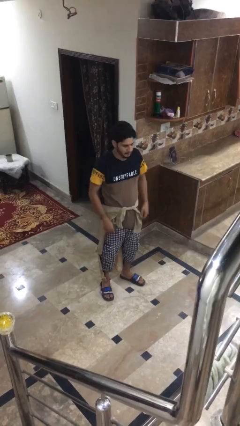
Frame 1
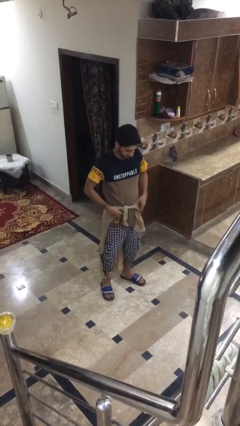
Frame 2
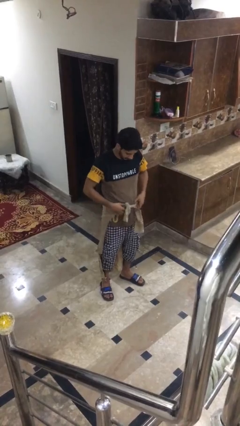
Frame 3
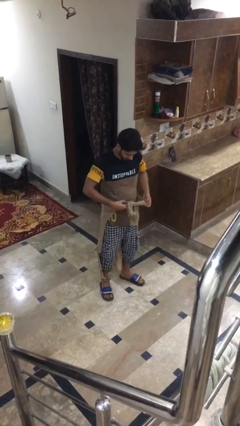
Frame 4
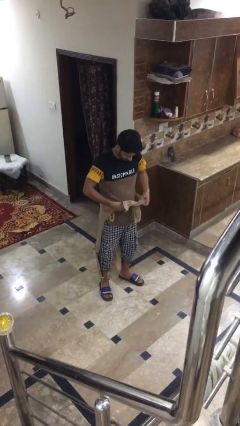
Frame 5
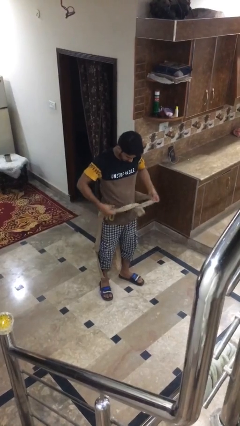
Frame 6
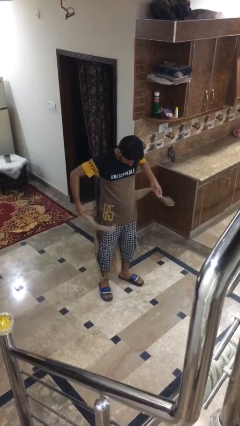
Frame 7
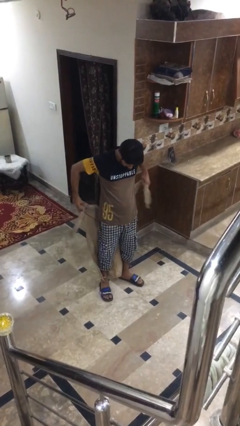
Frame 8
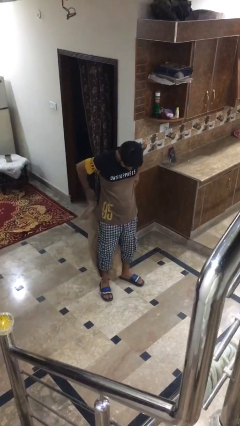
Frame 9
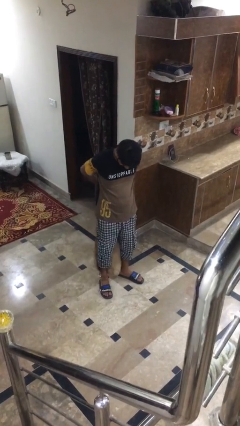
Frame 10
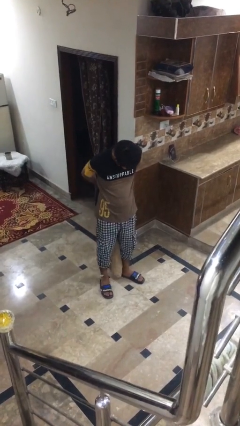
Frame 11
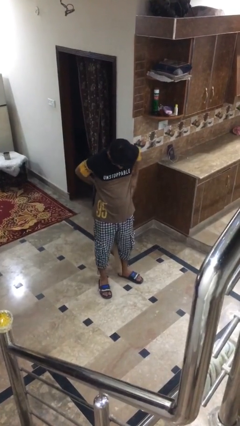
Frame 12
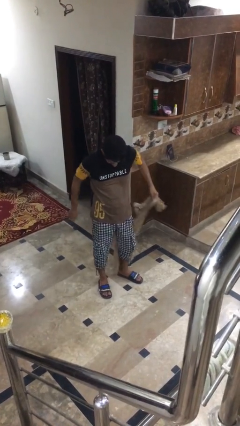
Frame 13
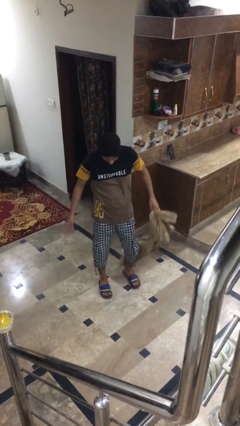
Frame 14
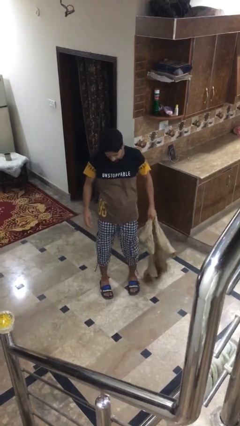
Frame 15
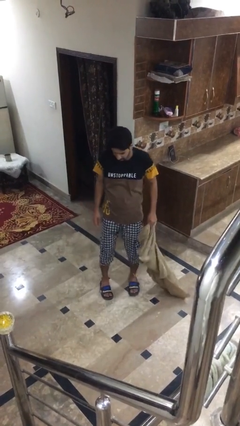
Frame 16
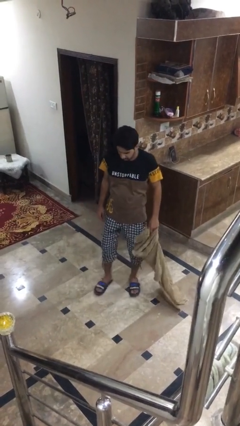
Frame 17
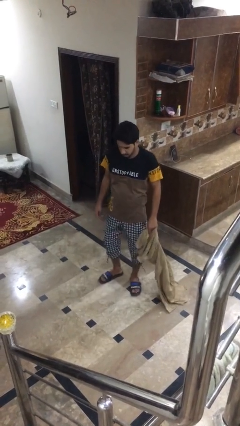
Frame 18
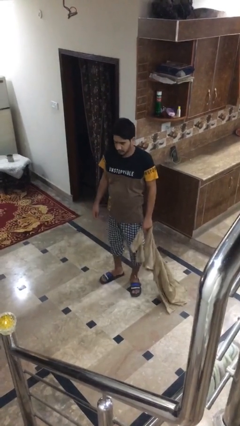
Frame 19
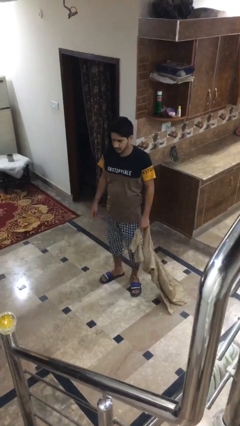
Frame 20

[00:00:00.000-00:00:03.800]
person unties jacket around waist

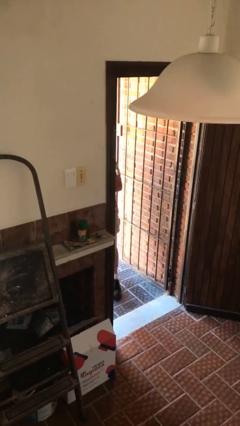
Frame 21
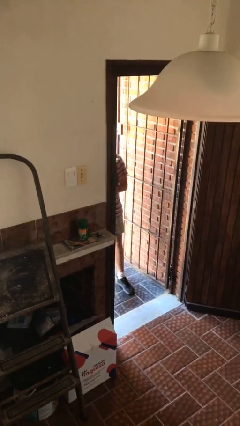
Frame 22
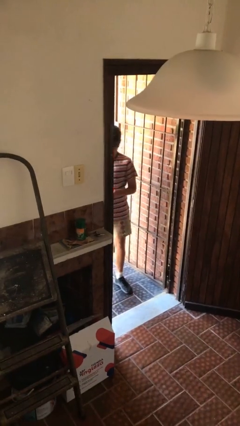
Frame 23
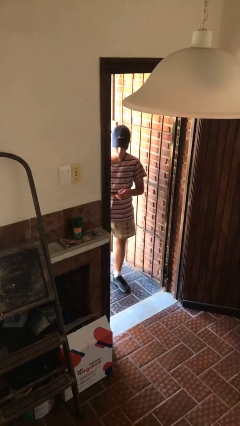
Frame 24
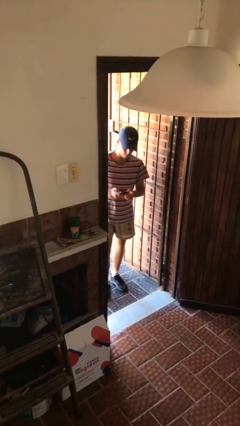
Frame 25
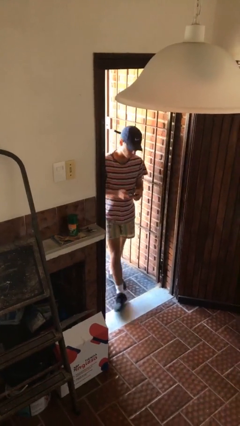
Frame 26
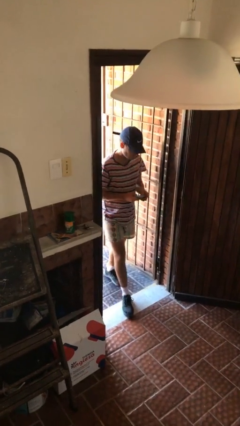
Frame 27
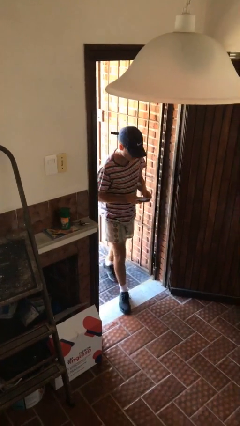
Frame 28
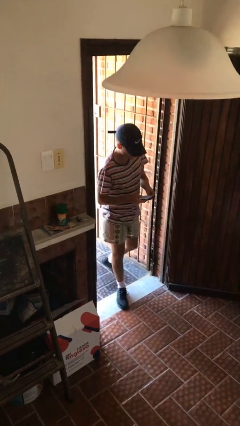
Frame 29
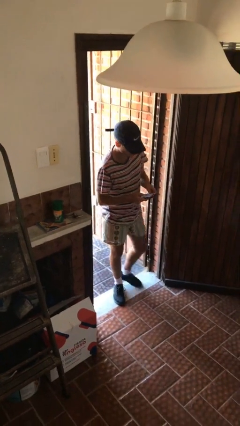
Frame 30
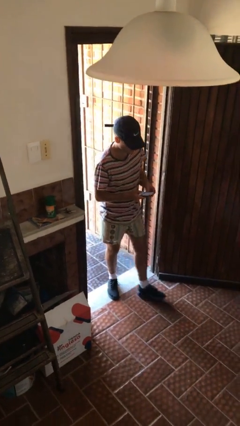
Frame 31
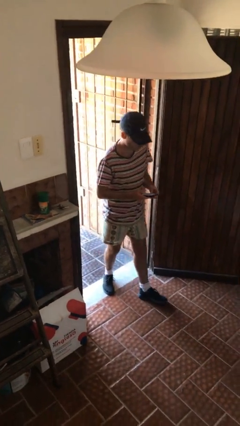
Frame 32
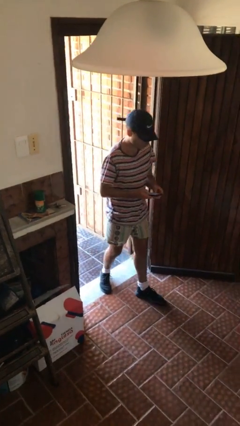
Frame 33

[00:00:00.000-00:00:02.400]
person enters scene through structure

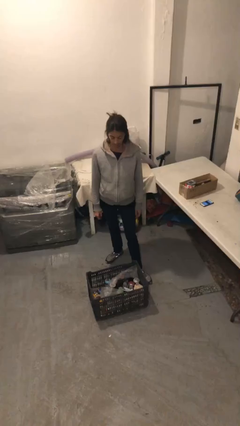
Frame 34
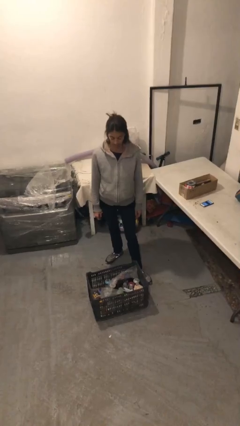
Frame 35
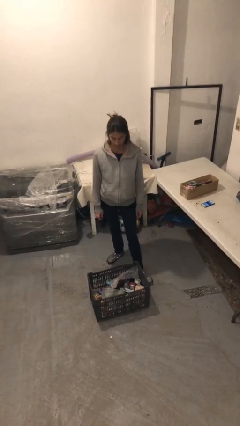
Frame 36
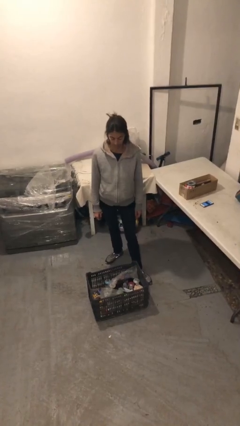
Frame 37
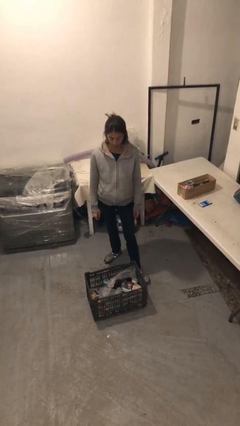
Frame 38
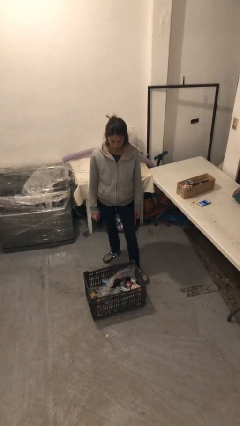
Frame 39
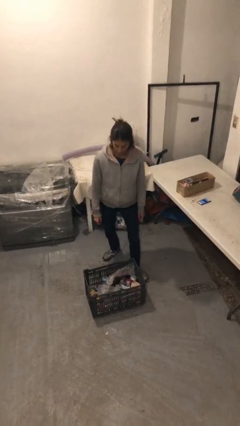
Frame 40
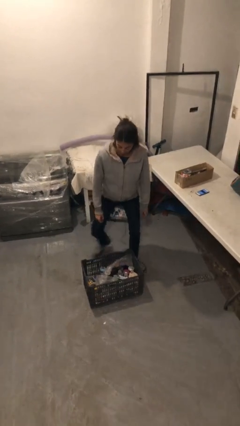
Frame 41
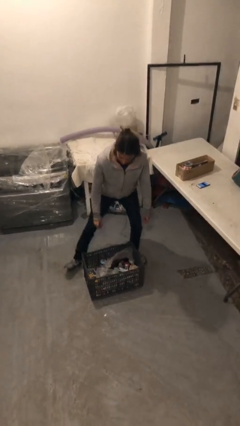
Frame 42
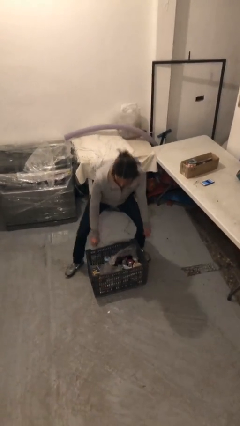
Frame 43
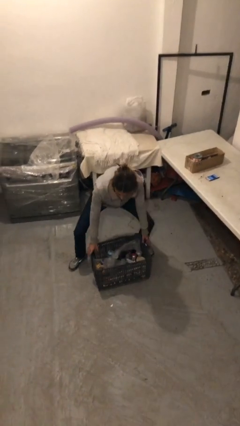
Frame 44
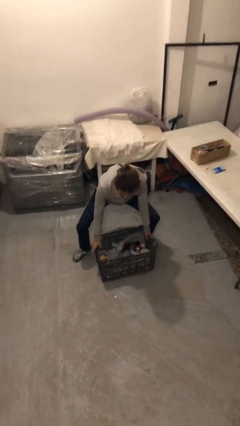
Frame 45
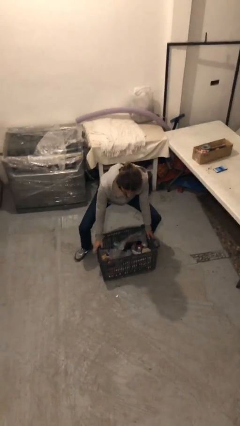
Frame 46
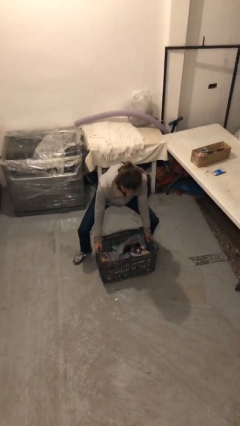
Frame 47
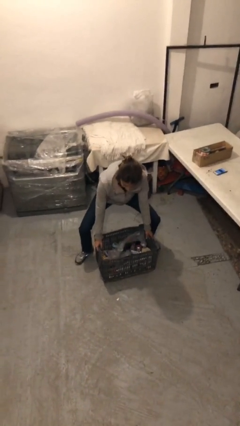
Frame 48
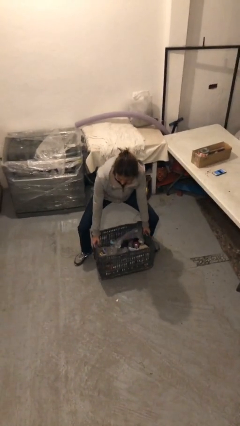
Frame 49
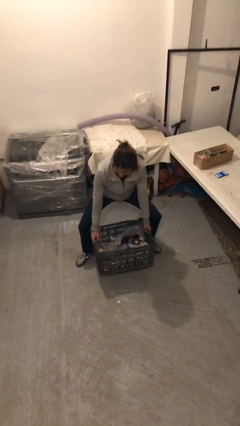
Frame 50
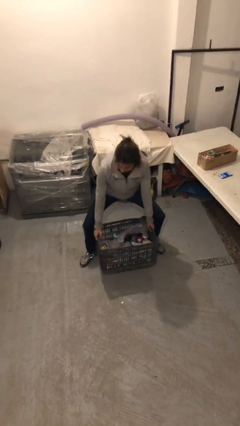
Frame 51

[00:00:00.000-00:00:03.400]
person picks up object from floor

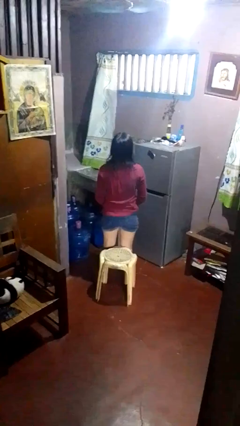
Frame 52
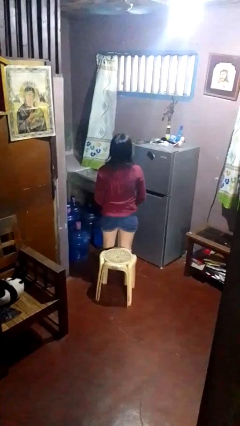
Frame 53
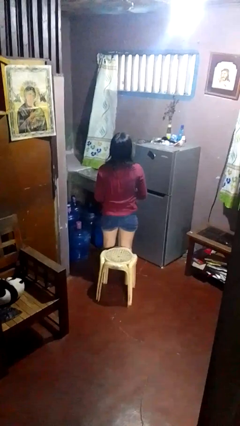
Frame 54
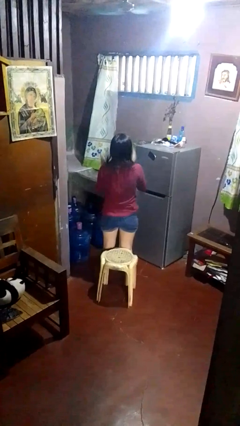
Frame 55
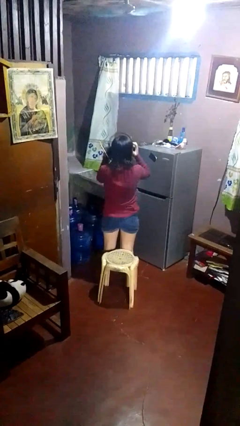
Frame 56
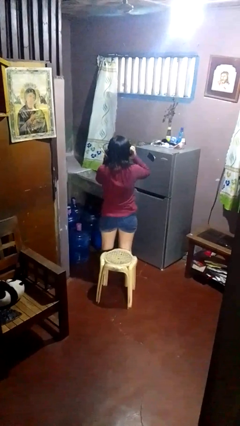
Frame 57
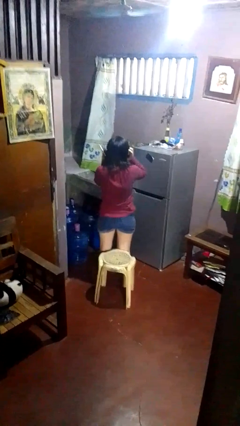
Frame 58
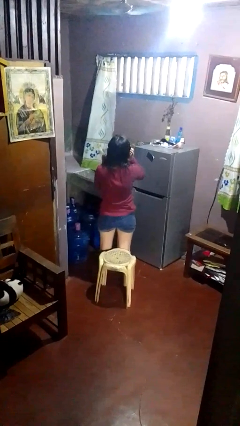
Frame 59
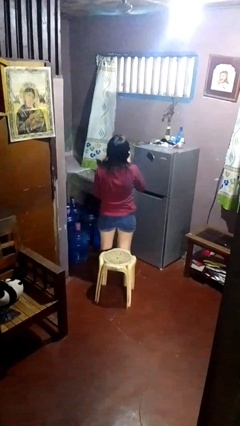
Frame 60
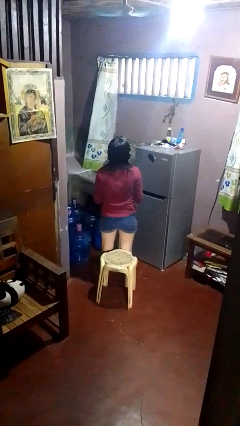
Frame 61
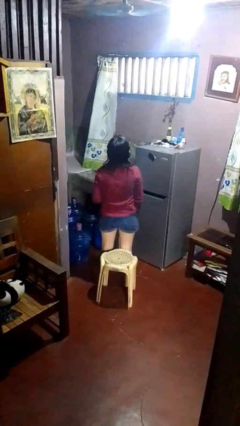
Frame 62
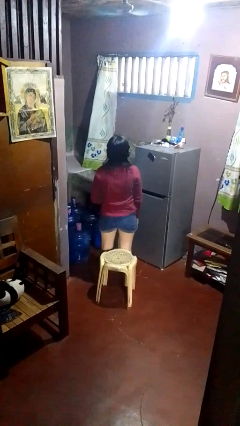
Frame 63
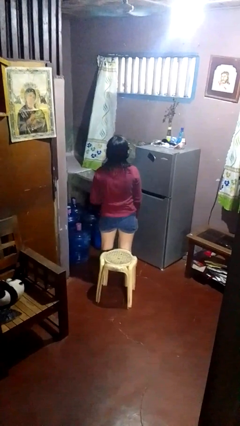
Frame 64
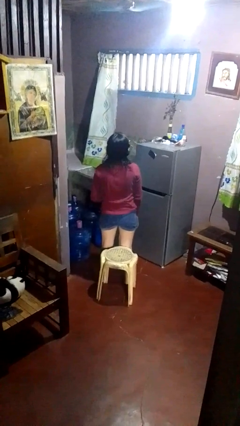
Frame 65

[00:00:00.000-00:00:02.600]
person puts on headphones

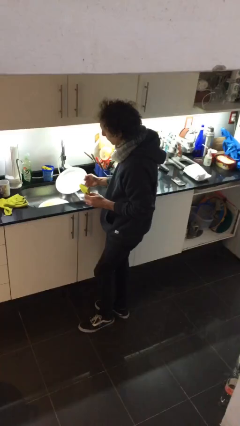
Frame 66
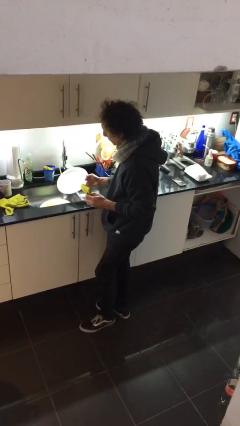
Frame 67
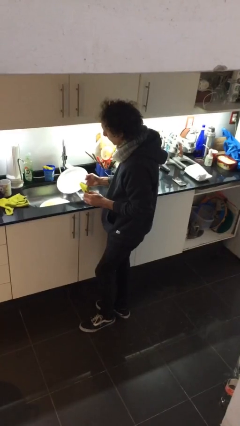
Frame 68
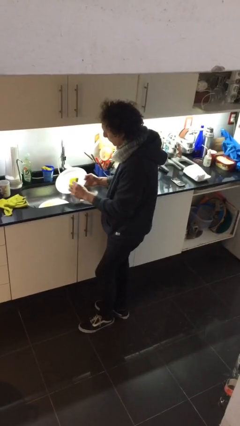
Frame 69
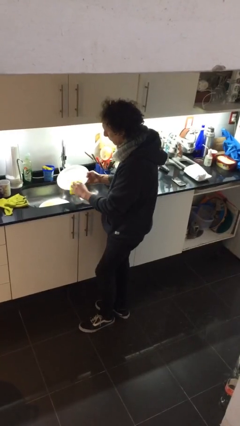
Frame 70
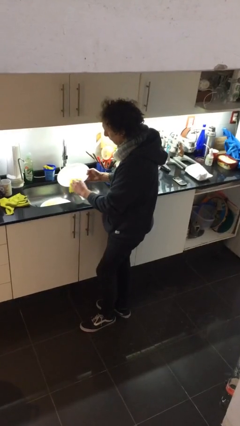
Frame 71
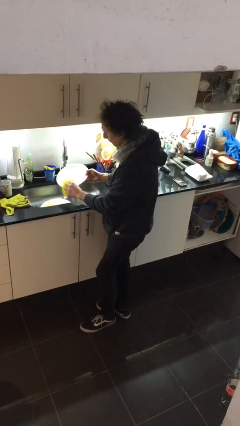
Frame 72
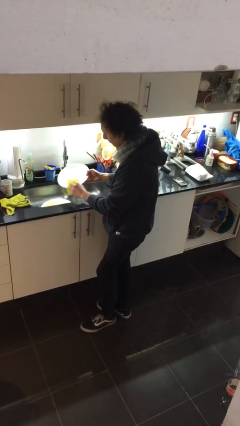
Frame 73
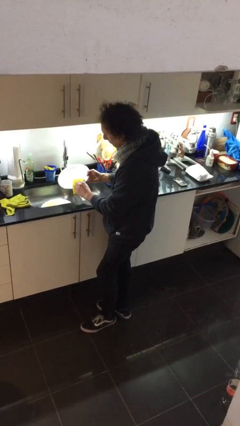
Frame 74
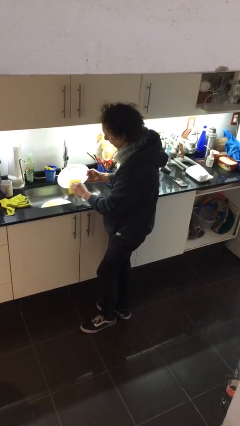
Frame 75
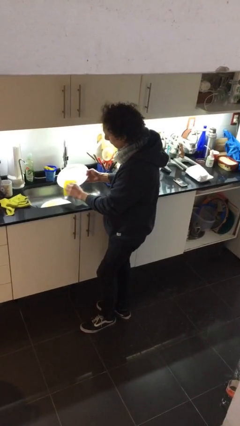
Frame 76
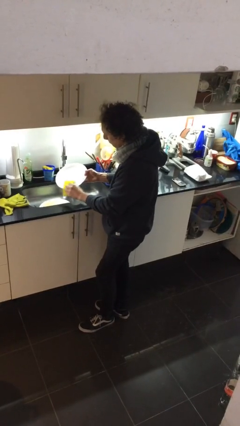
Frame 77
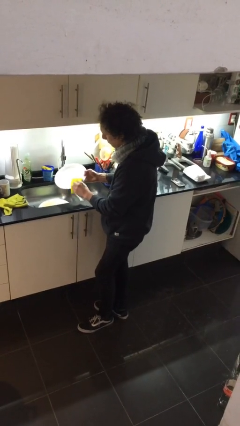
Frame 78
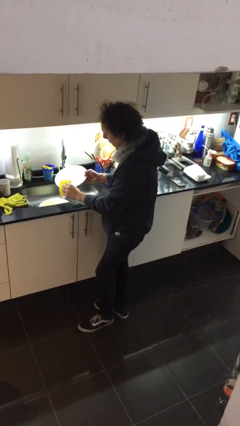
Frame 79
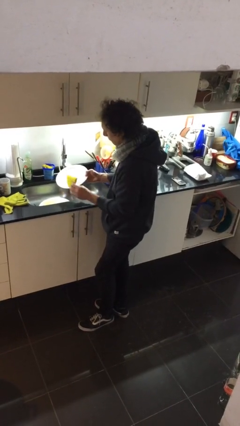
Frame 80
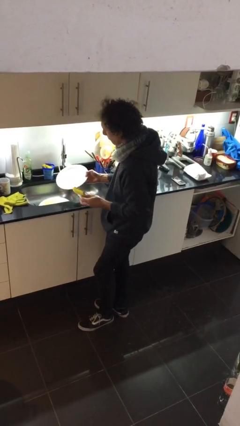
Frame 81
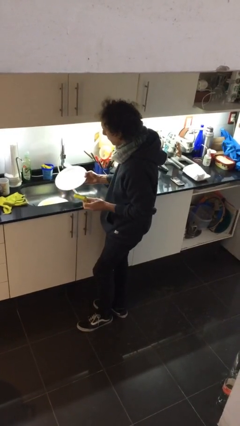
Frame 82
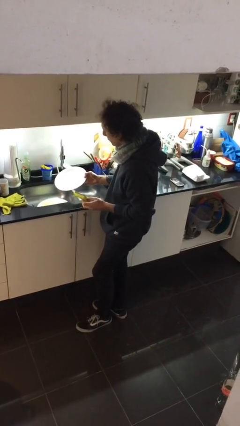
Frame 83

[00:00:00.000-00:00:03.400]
person washes dish

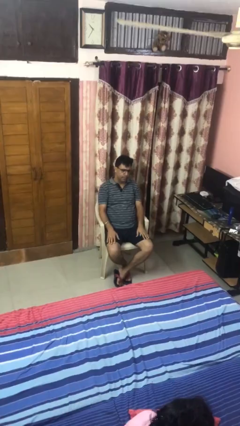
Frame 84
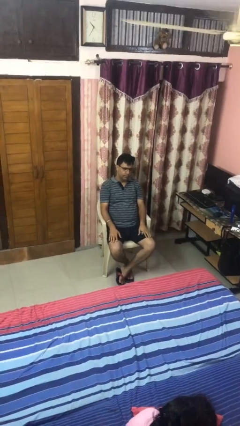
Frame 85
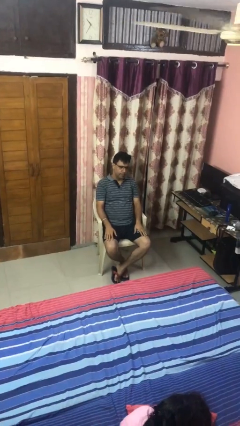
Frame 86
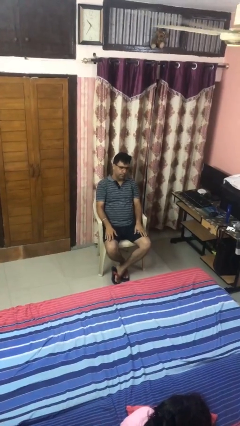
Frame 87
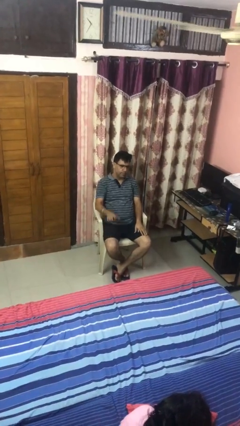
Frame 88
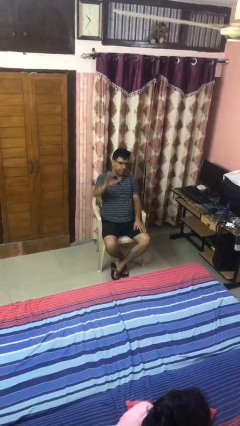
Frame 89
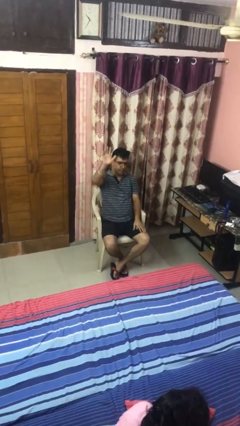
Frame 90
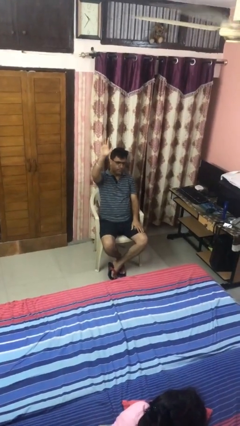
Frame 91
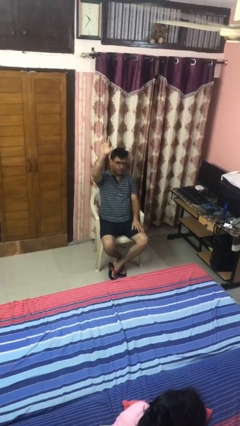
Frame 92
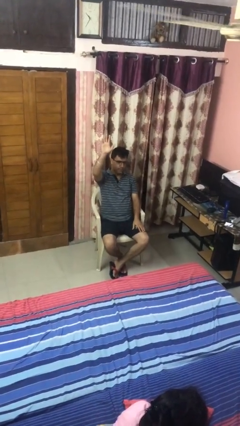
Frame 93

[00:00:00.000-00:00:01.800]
person gestures raise hand
